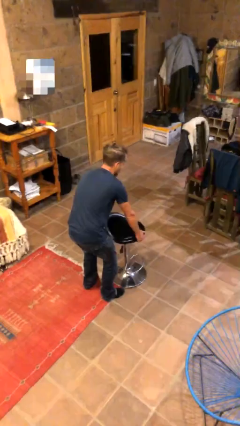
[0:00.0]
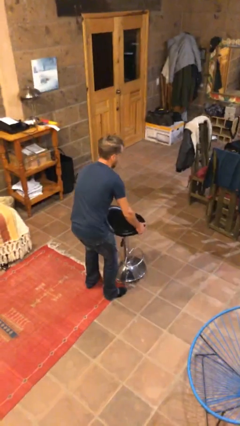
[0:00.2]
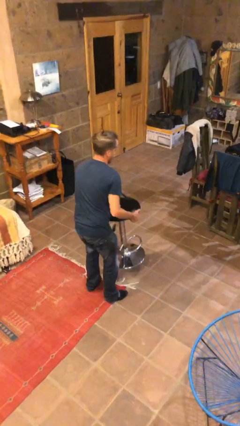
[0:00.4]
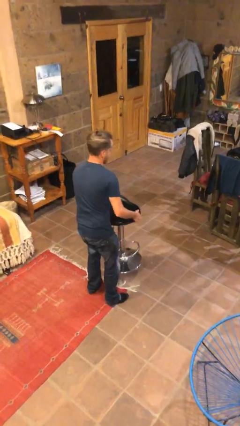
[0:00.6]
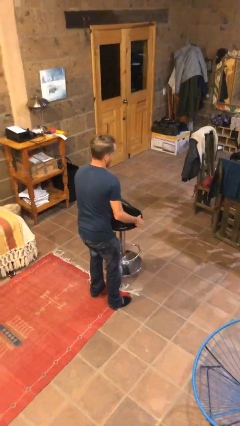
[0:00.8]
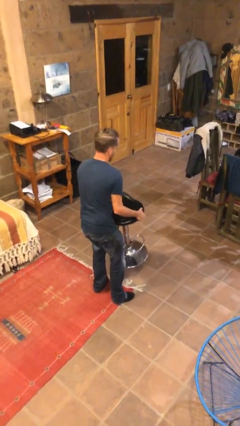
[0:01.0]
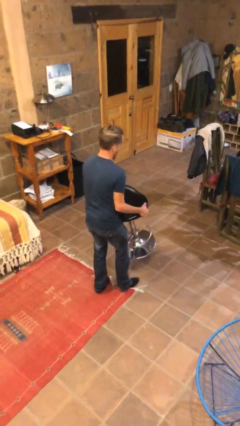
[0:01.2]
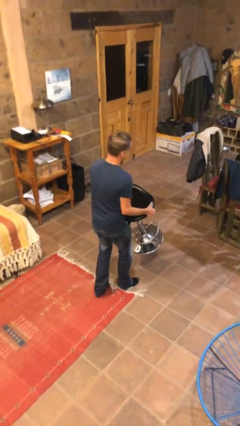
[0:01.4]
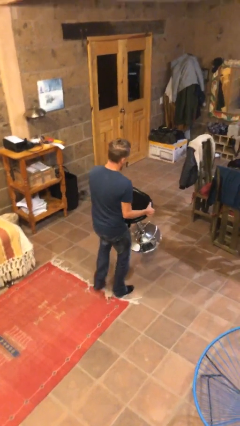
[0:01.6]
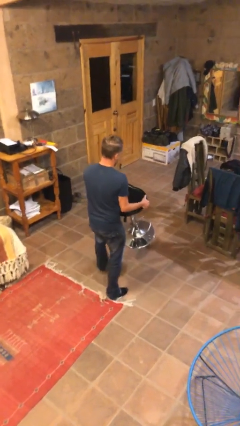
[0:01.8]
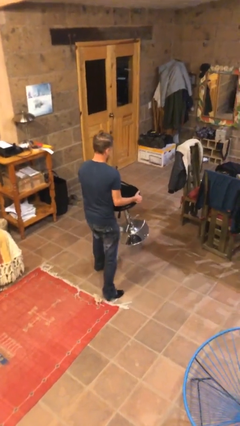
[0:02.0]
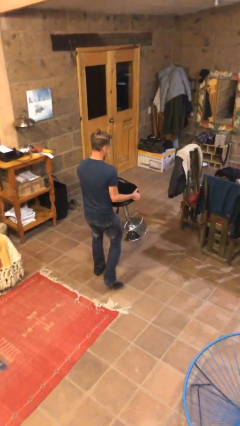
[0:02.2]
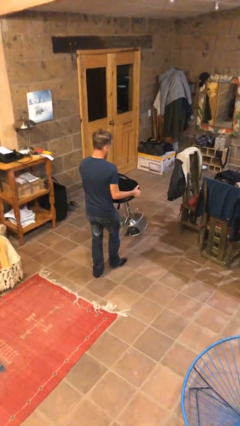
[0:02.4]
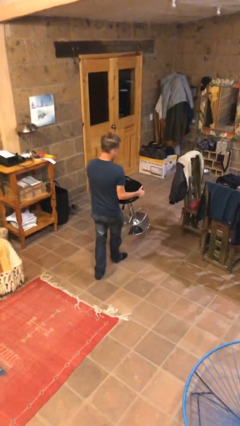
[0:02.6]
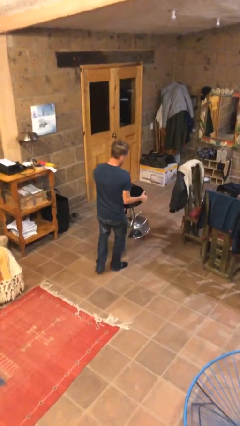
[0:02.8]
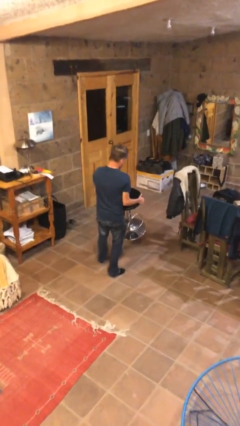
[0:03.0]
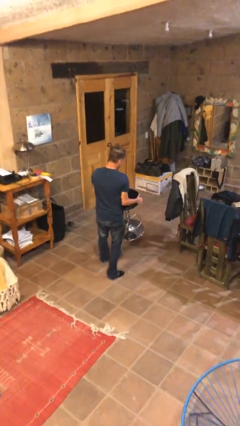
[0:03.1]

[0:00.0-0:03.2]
person carries heavy object

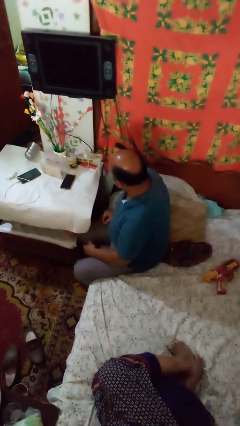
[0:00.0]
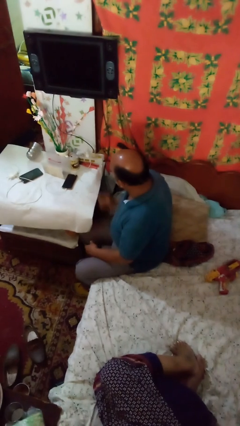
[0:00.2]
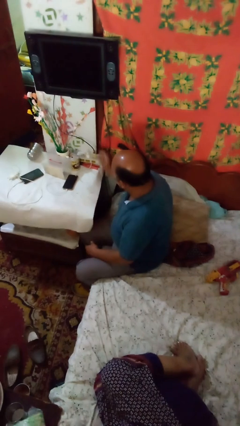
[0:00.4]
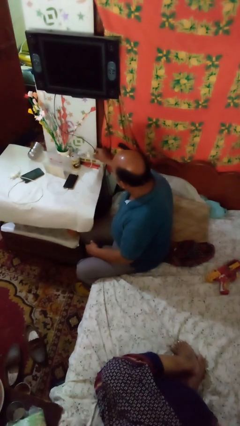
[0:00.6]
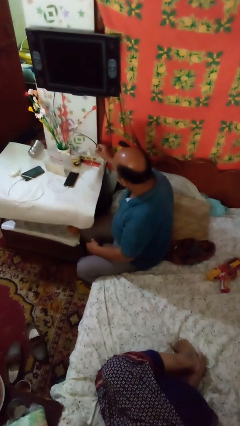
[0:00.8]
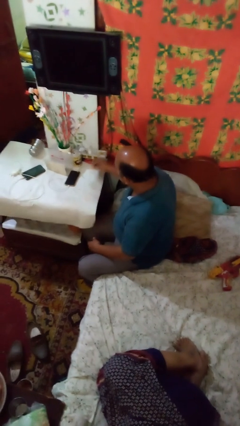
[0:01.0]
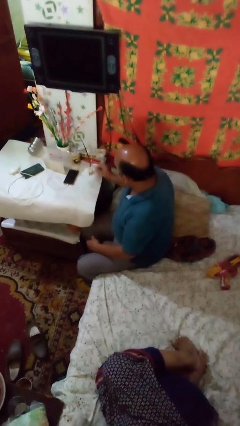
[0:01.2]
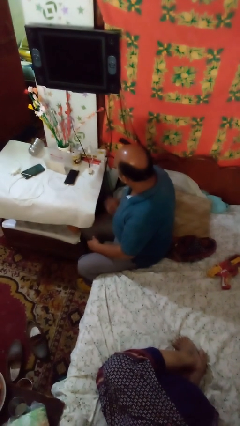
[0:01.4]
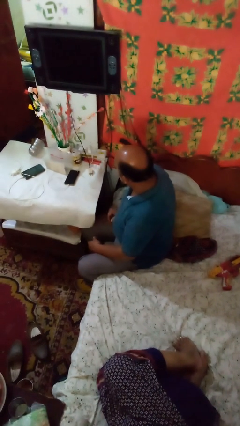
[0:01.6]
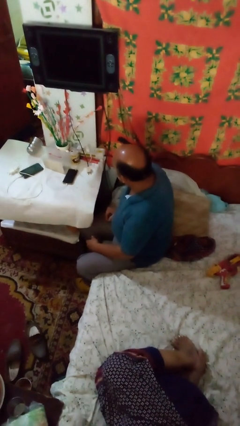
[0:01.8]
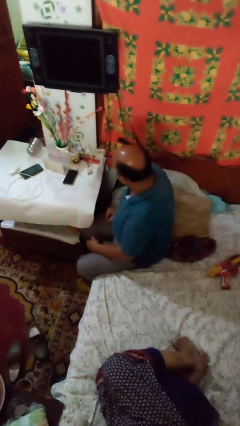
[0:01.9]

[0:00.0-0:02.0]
person unplugs from electrical socket

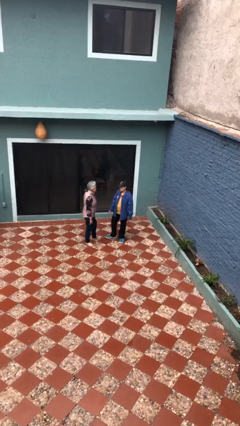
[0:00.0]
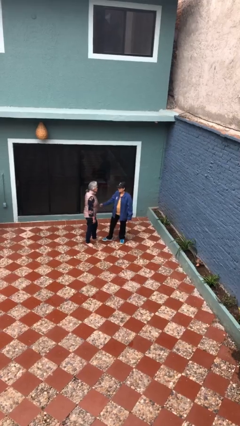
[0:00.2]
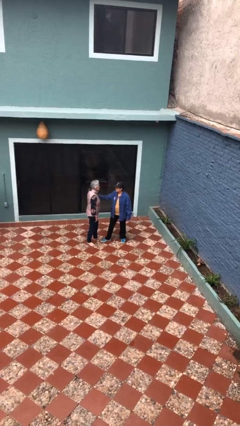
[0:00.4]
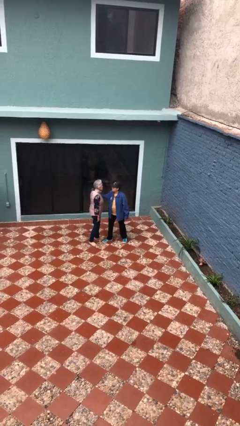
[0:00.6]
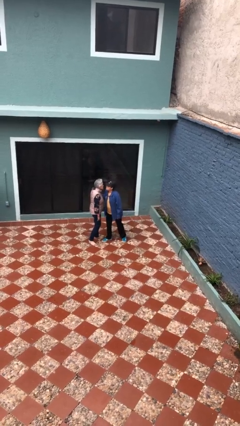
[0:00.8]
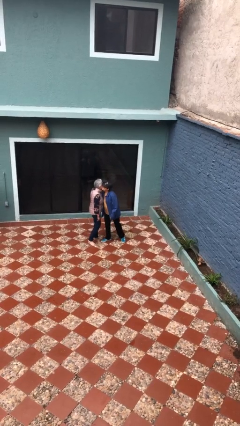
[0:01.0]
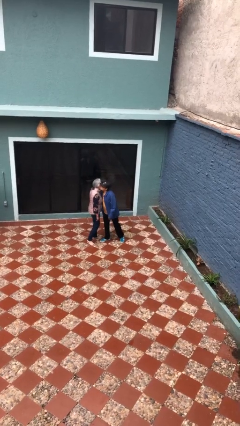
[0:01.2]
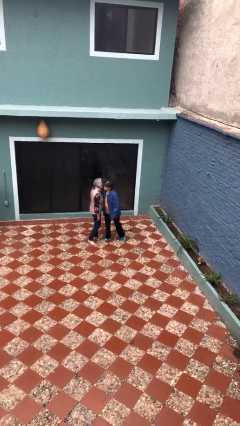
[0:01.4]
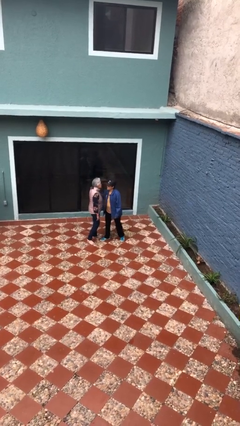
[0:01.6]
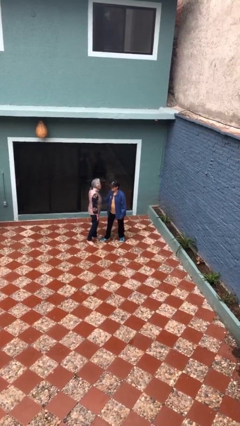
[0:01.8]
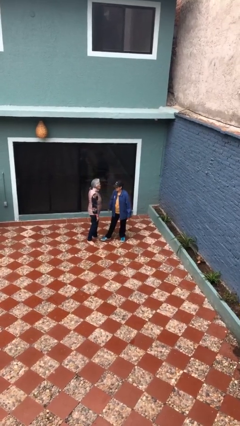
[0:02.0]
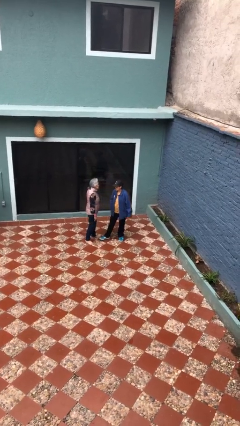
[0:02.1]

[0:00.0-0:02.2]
person kisses cheek of person

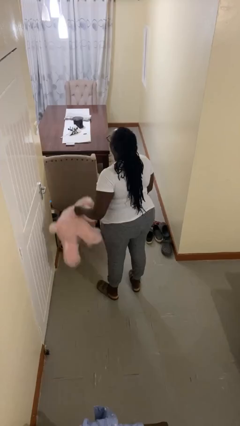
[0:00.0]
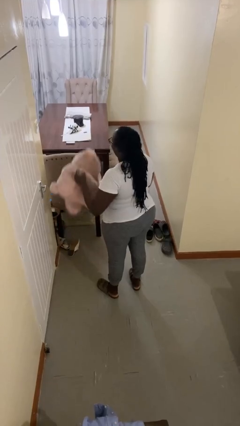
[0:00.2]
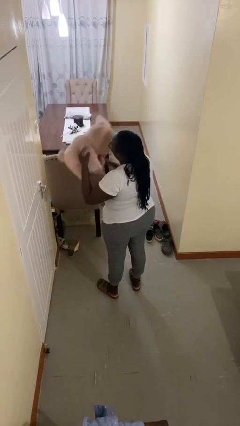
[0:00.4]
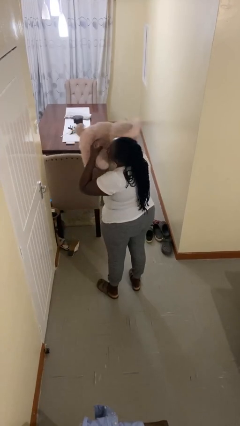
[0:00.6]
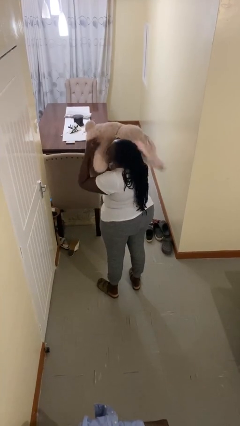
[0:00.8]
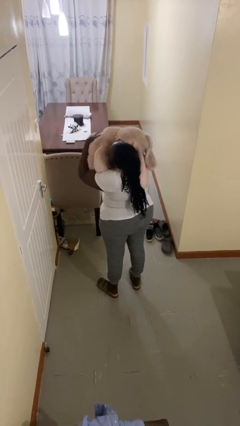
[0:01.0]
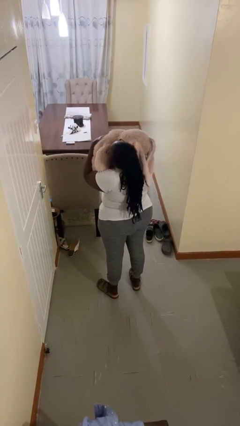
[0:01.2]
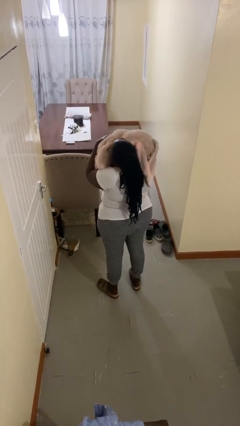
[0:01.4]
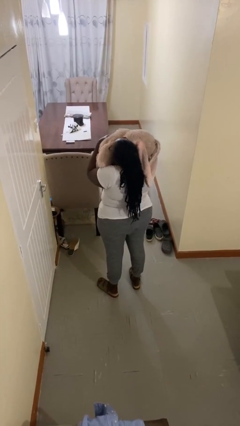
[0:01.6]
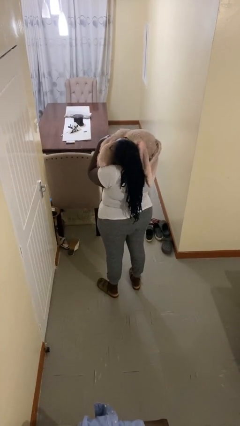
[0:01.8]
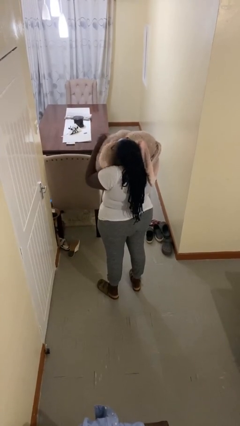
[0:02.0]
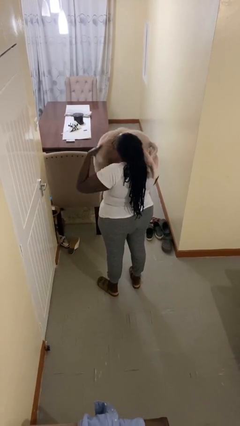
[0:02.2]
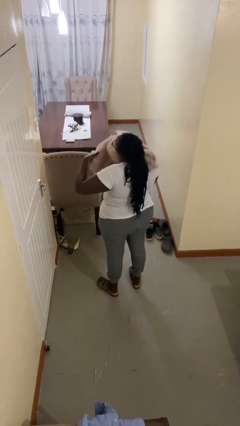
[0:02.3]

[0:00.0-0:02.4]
person hugs stuffed animal

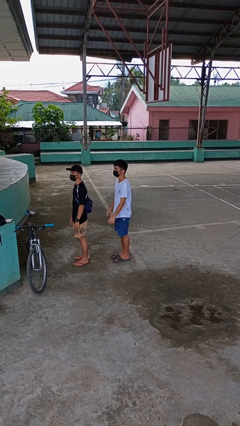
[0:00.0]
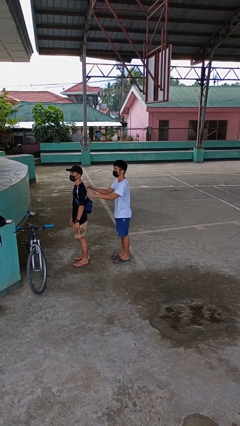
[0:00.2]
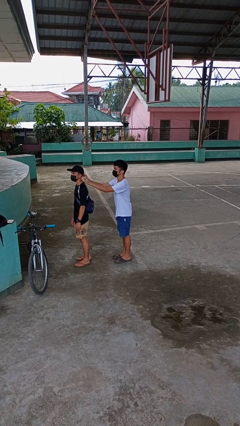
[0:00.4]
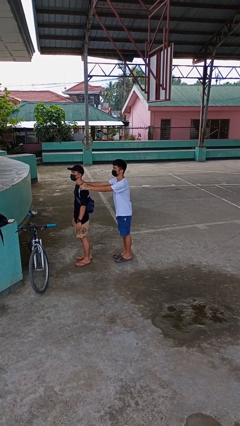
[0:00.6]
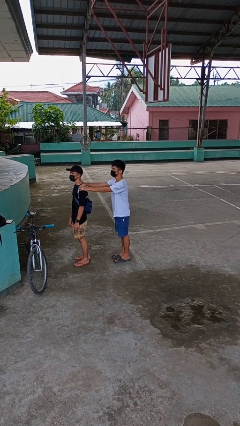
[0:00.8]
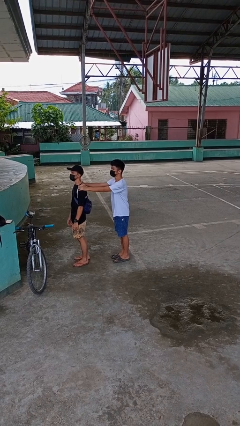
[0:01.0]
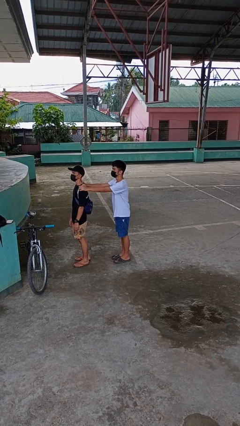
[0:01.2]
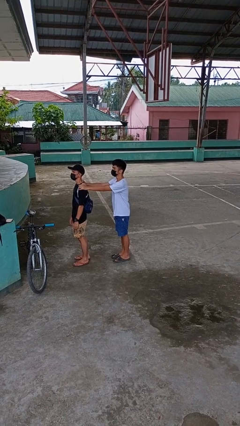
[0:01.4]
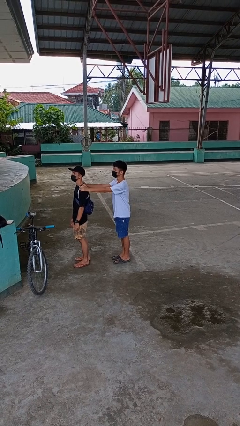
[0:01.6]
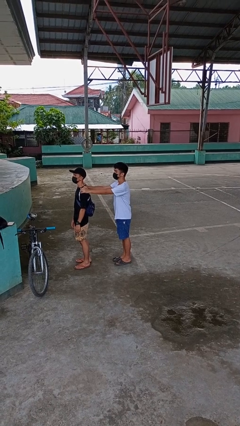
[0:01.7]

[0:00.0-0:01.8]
person grabs person by shoulder

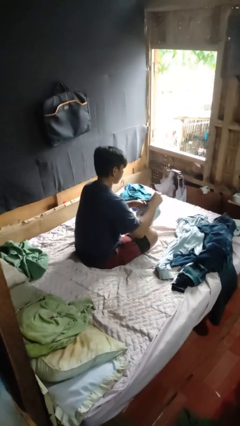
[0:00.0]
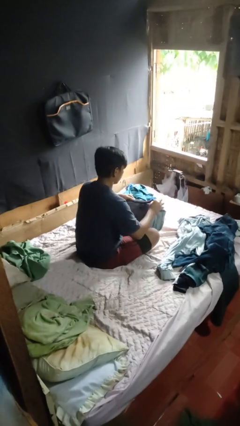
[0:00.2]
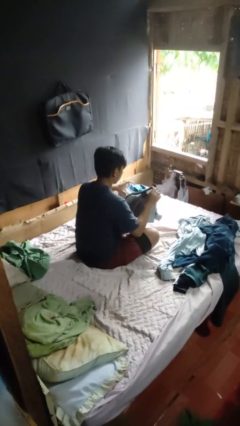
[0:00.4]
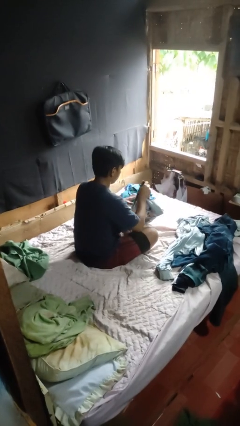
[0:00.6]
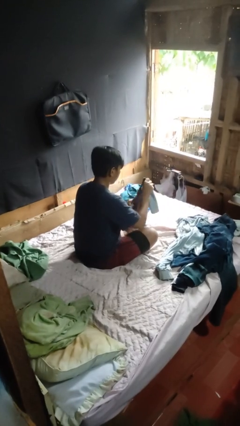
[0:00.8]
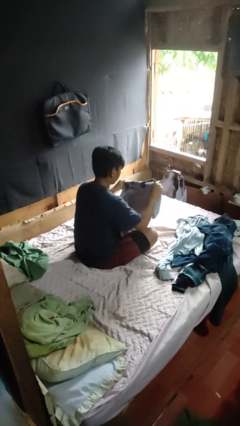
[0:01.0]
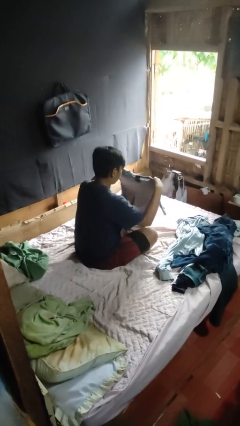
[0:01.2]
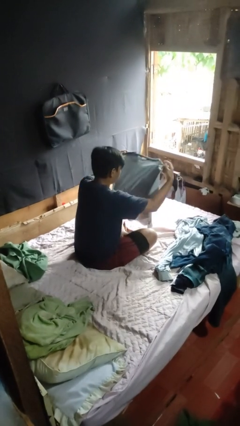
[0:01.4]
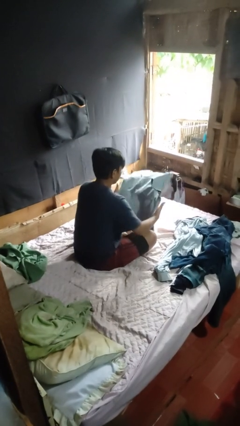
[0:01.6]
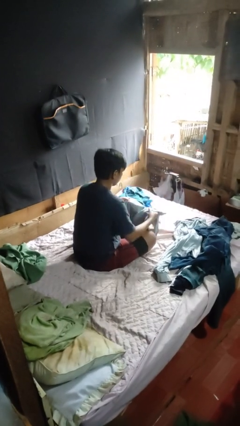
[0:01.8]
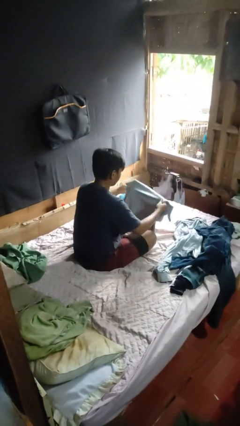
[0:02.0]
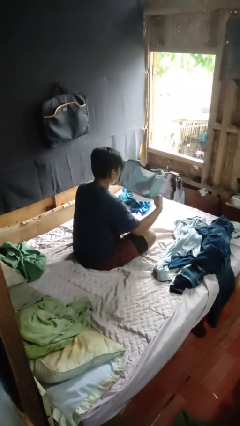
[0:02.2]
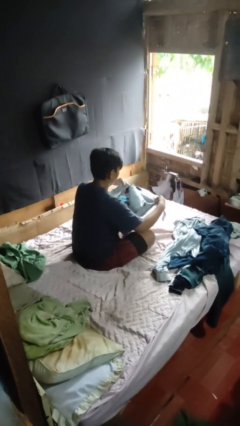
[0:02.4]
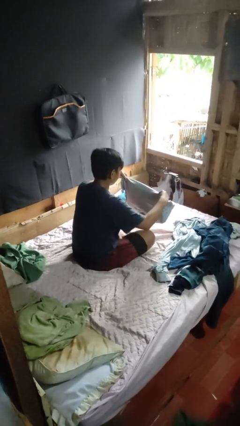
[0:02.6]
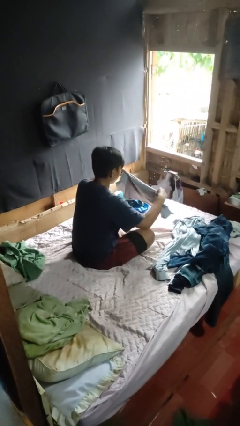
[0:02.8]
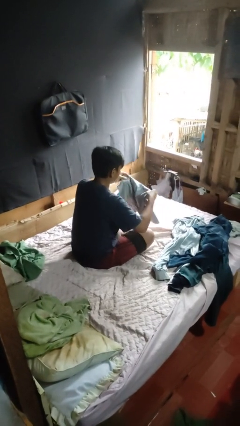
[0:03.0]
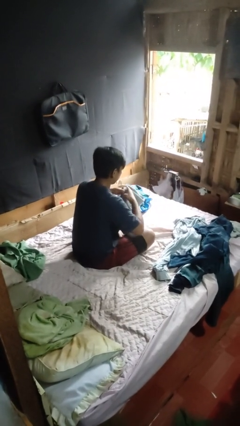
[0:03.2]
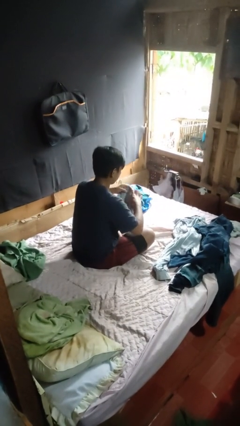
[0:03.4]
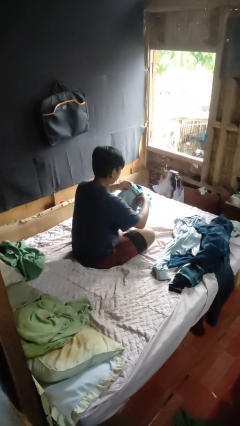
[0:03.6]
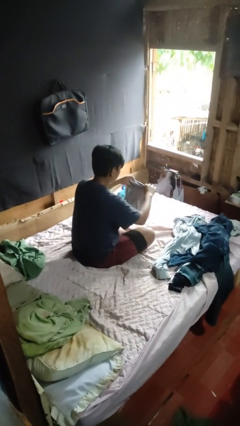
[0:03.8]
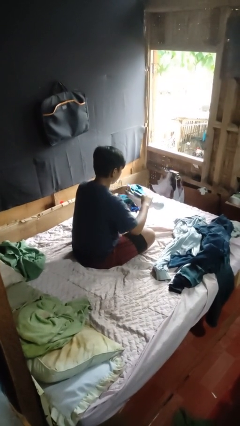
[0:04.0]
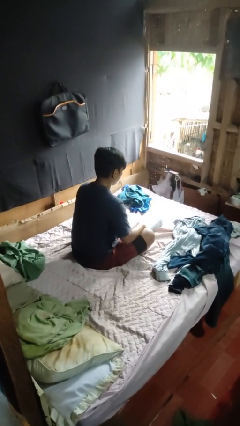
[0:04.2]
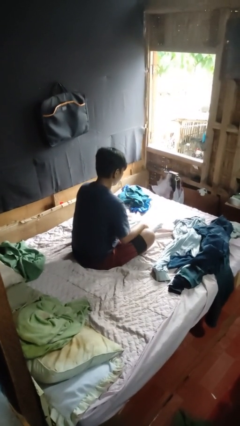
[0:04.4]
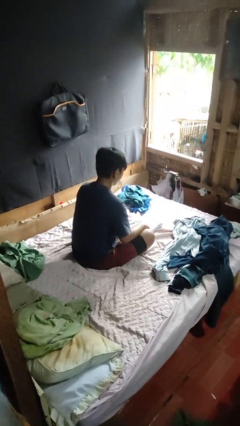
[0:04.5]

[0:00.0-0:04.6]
person folds shirt

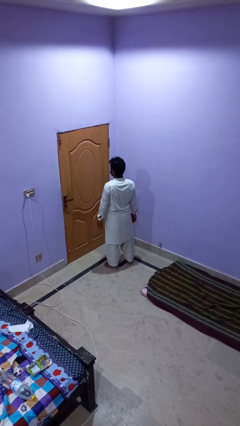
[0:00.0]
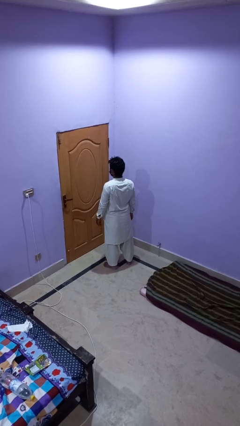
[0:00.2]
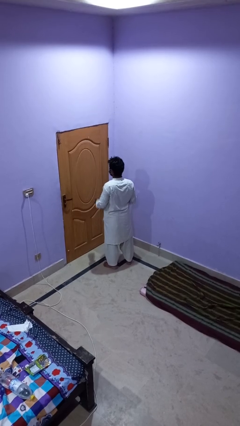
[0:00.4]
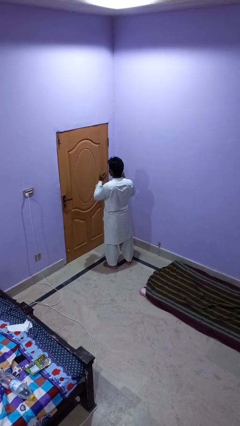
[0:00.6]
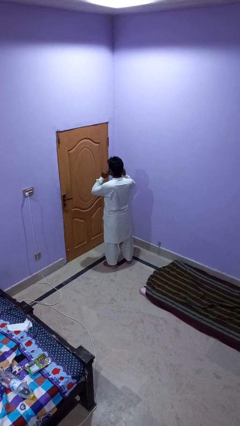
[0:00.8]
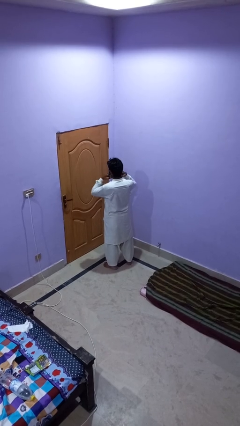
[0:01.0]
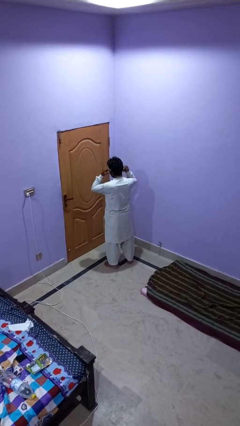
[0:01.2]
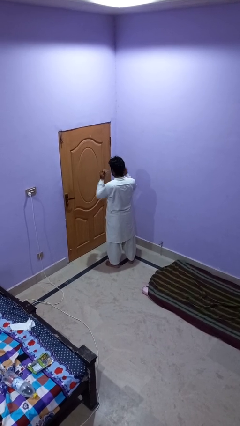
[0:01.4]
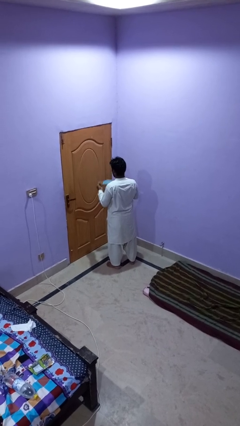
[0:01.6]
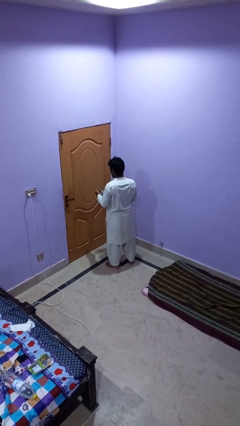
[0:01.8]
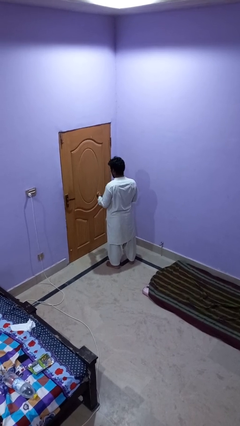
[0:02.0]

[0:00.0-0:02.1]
person takes off facemask
